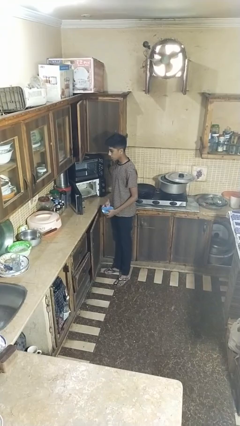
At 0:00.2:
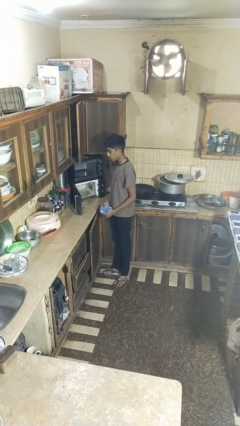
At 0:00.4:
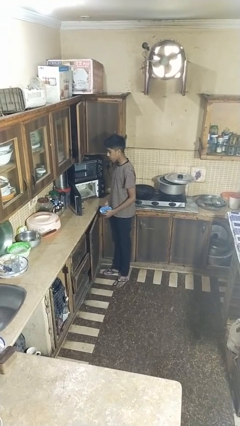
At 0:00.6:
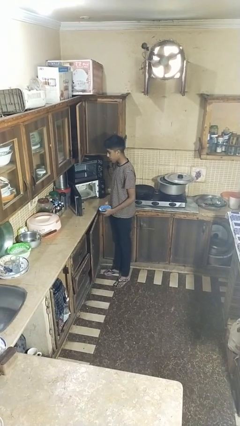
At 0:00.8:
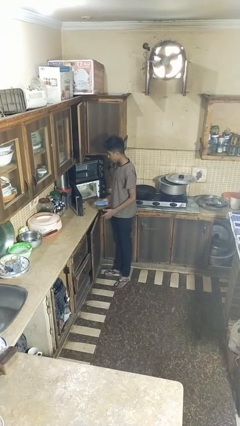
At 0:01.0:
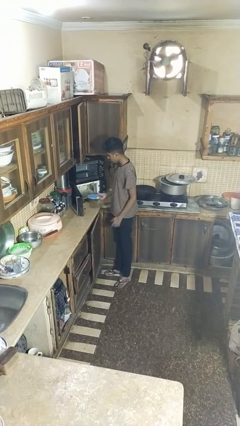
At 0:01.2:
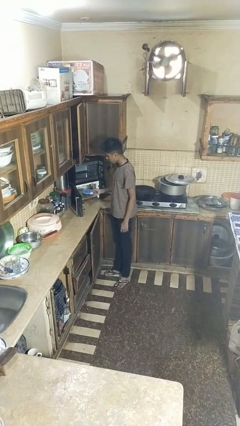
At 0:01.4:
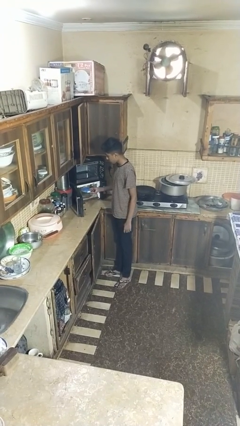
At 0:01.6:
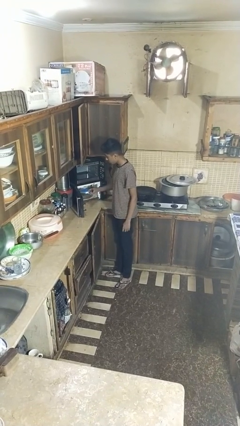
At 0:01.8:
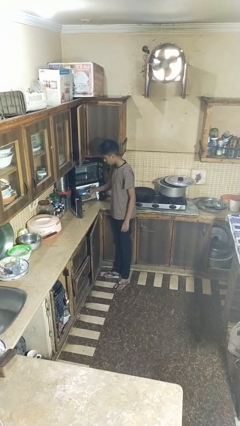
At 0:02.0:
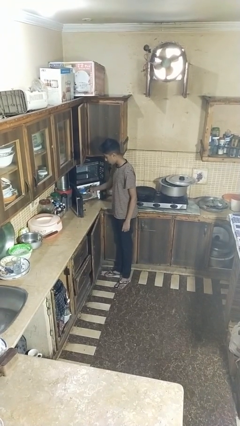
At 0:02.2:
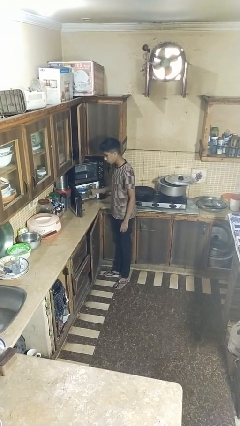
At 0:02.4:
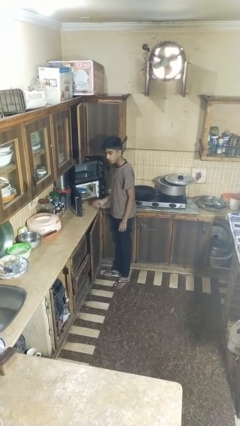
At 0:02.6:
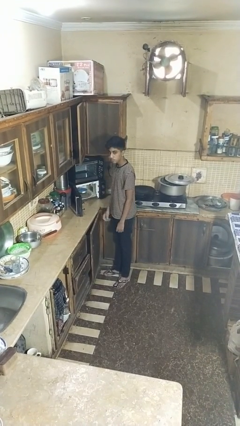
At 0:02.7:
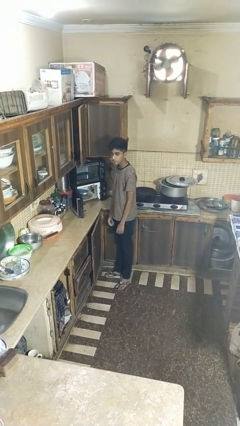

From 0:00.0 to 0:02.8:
person puts object into microwave

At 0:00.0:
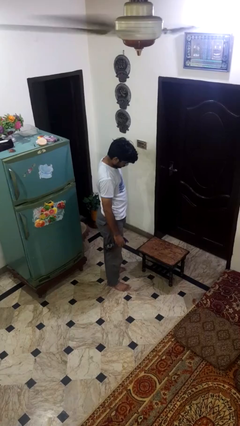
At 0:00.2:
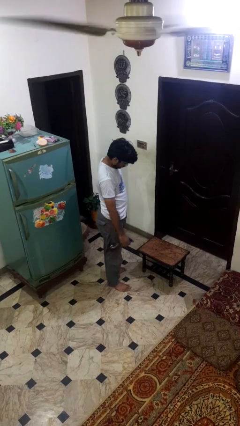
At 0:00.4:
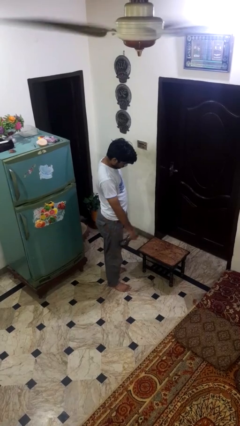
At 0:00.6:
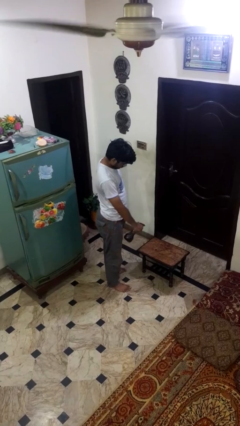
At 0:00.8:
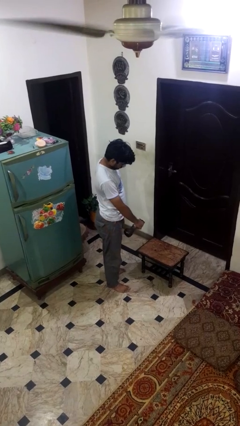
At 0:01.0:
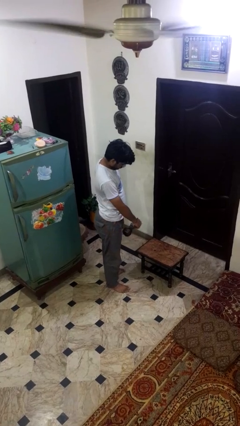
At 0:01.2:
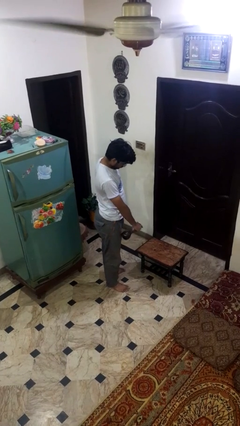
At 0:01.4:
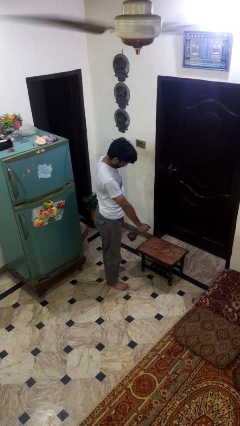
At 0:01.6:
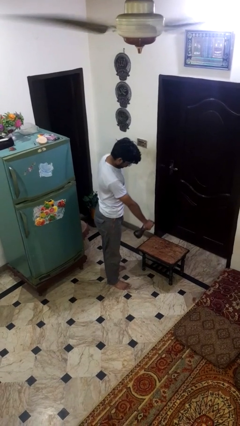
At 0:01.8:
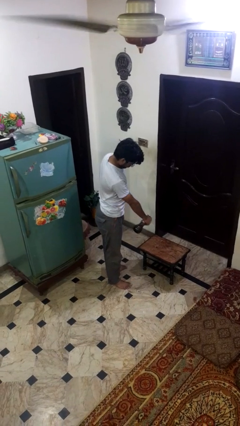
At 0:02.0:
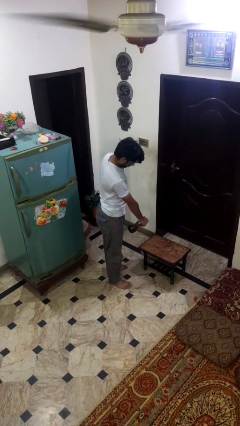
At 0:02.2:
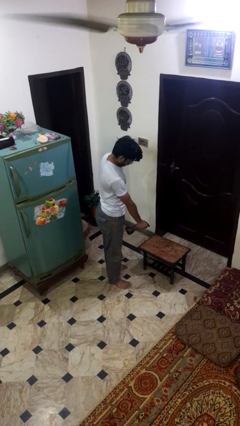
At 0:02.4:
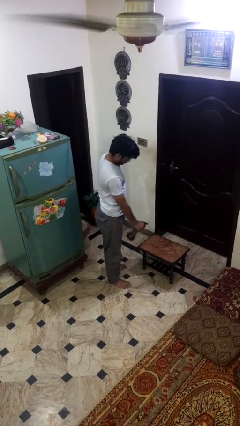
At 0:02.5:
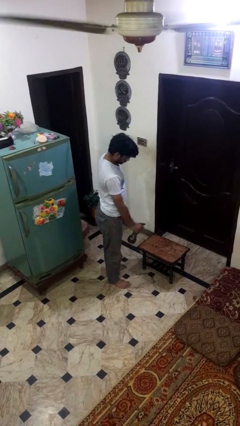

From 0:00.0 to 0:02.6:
person sprays from bottle

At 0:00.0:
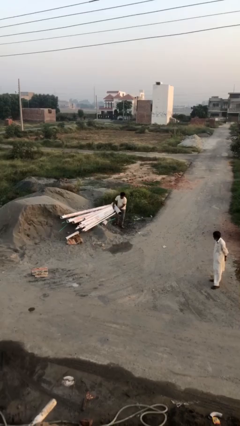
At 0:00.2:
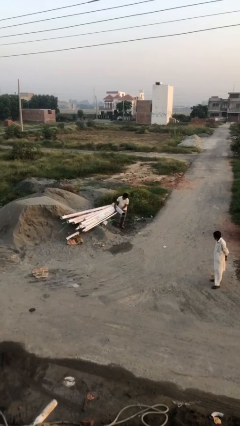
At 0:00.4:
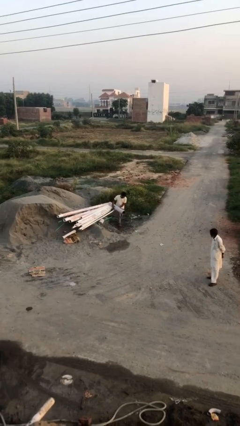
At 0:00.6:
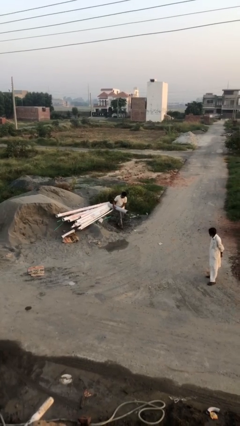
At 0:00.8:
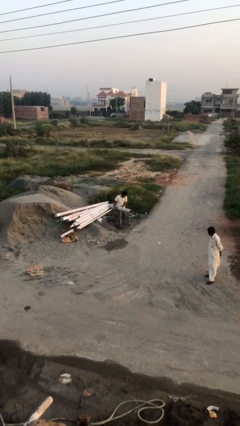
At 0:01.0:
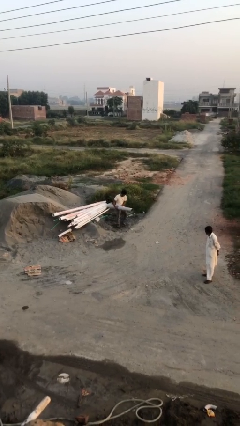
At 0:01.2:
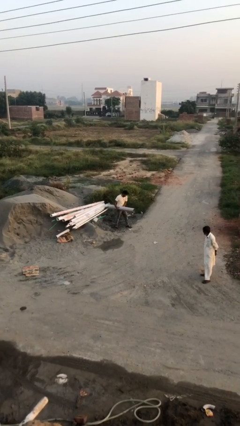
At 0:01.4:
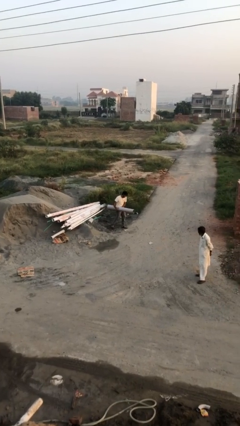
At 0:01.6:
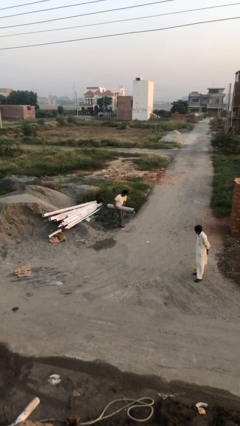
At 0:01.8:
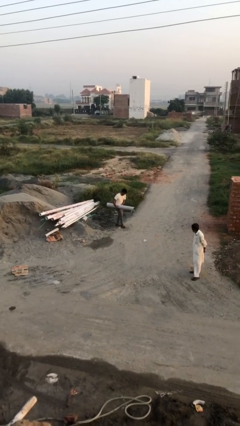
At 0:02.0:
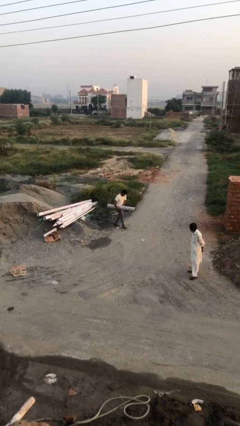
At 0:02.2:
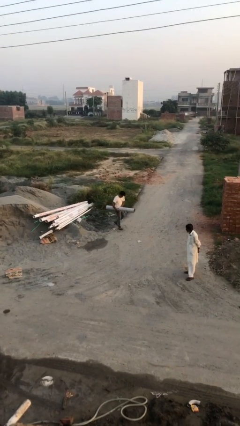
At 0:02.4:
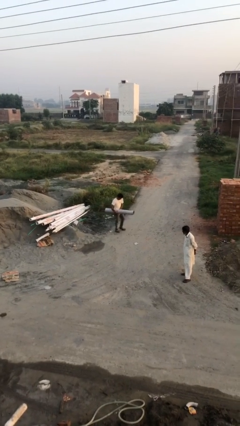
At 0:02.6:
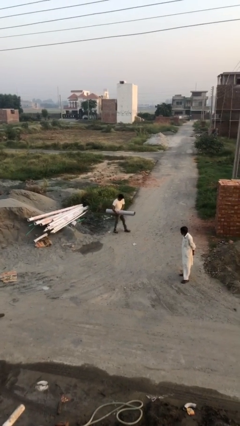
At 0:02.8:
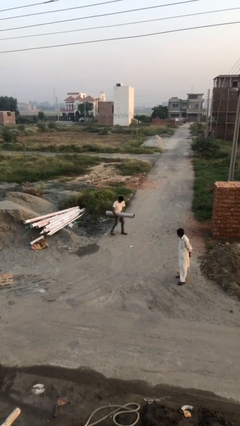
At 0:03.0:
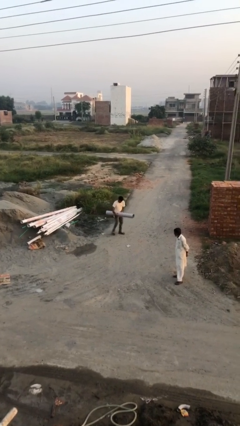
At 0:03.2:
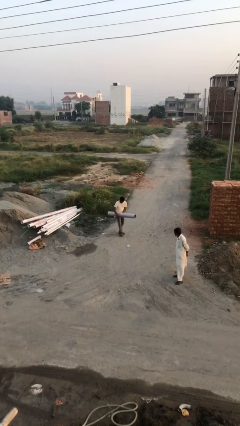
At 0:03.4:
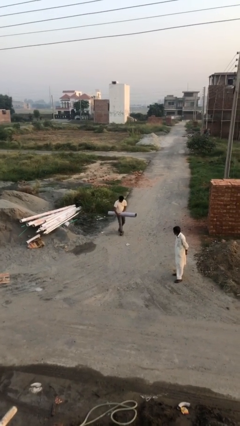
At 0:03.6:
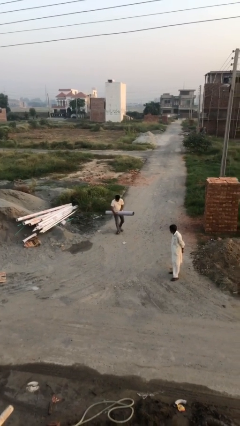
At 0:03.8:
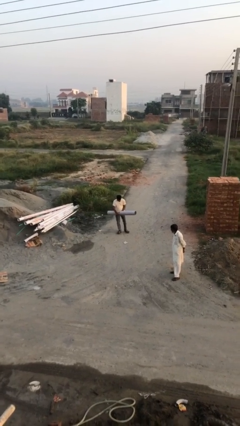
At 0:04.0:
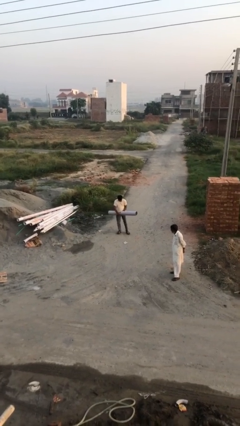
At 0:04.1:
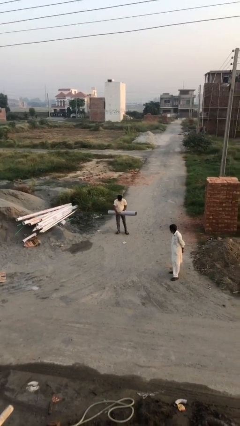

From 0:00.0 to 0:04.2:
person carries heavy object

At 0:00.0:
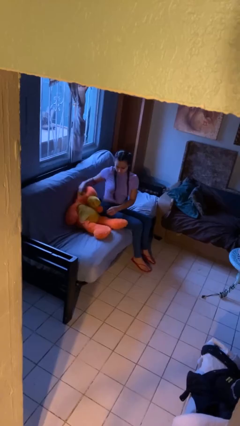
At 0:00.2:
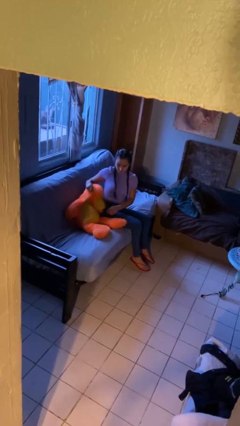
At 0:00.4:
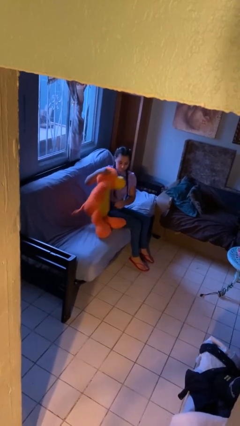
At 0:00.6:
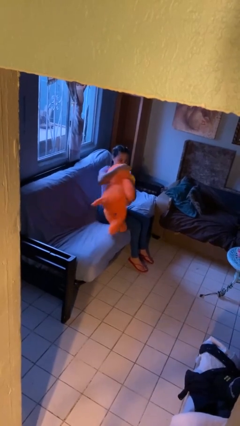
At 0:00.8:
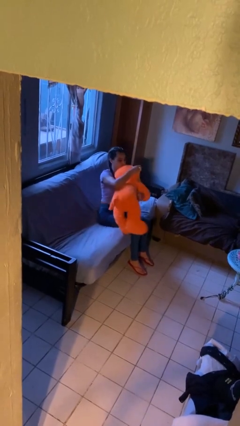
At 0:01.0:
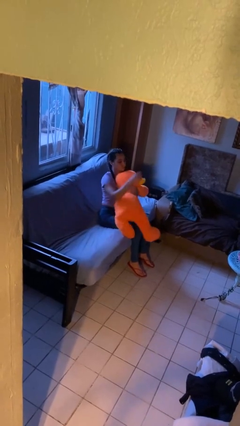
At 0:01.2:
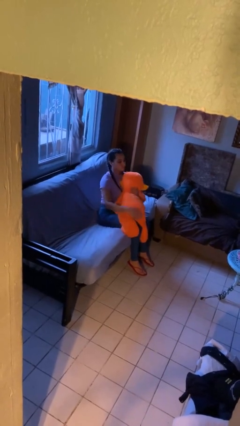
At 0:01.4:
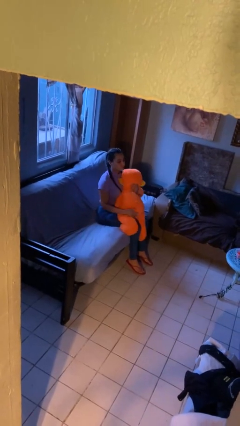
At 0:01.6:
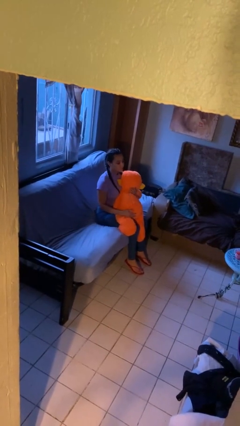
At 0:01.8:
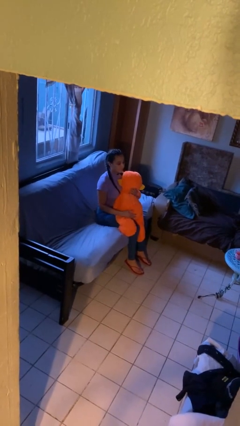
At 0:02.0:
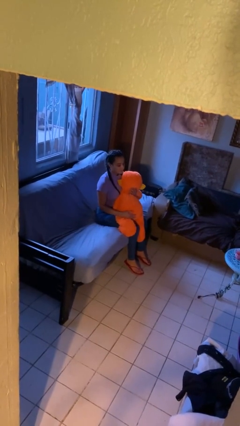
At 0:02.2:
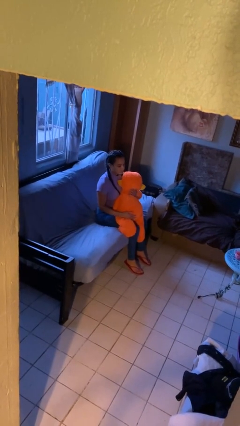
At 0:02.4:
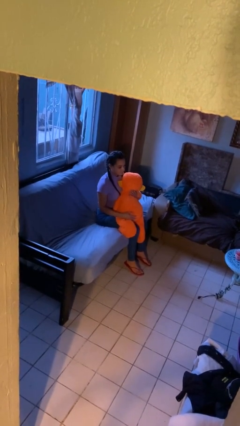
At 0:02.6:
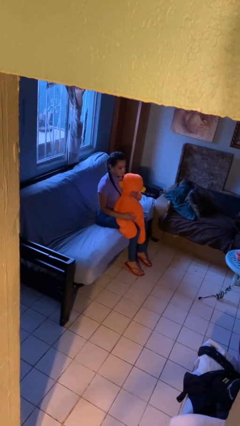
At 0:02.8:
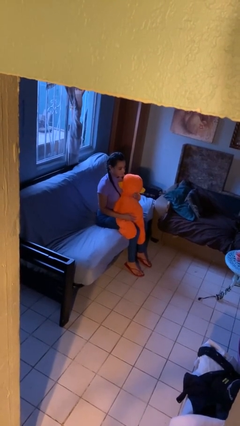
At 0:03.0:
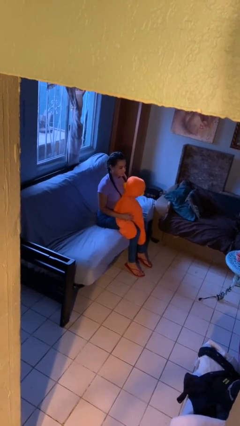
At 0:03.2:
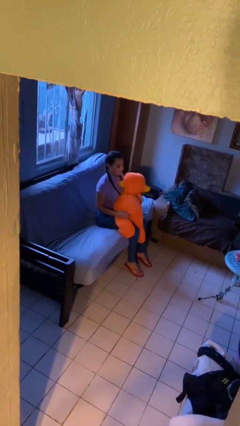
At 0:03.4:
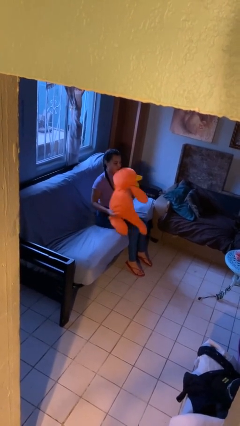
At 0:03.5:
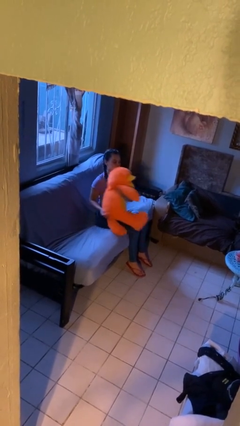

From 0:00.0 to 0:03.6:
person hugs stuffed animal

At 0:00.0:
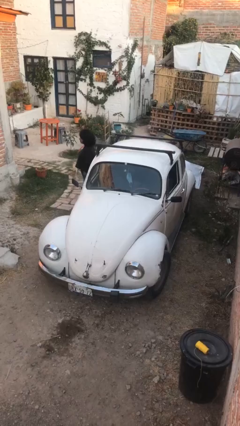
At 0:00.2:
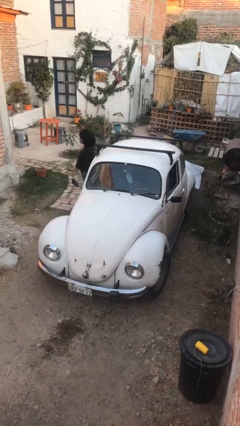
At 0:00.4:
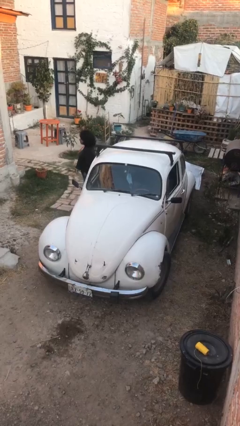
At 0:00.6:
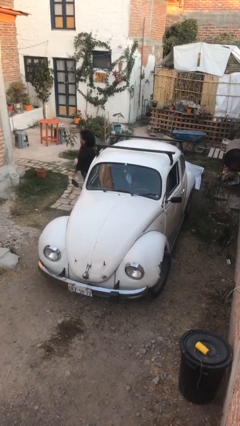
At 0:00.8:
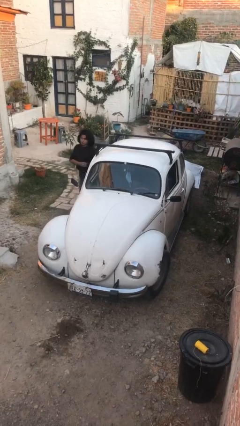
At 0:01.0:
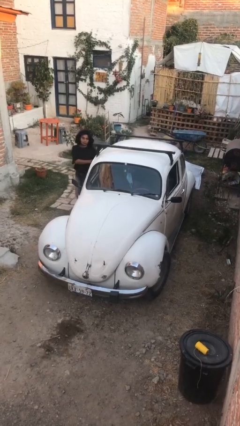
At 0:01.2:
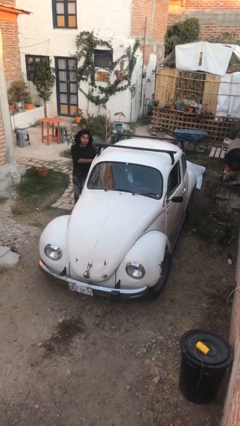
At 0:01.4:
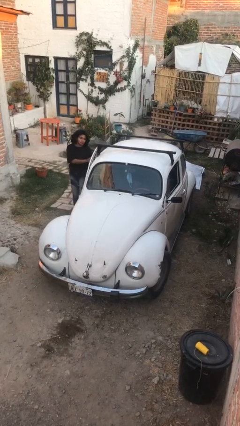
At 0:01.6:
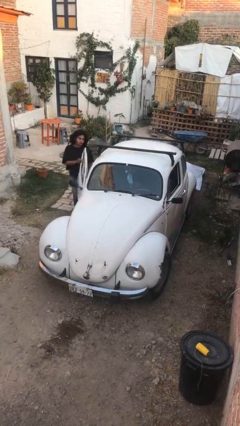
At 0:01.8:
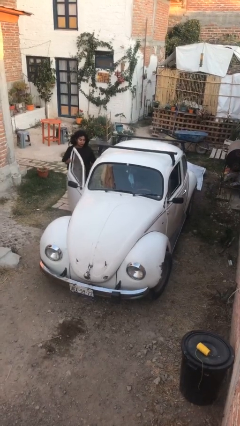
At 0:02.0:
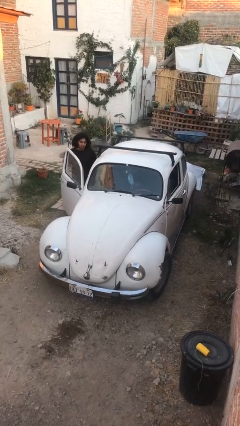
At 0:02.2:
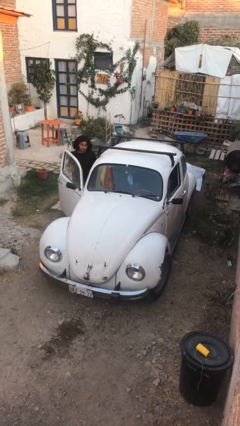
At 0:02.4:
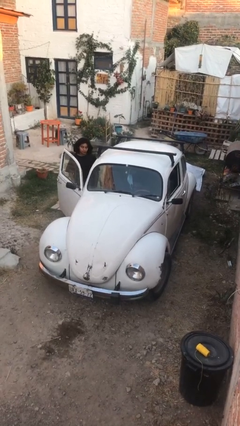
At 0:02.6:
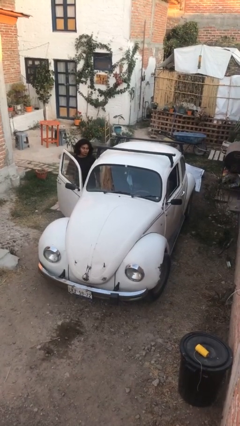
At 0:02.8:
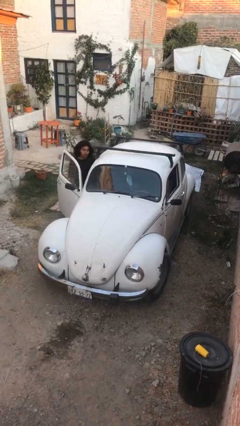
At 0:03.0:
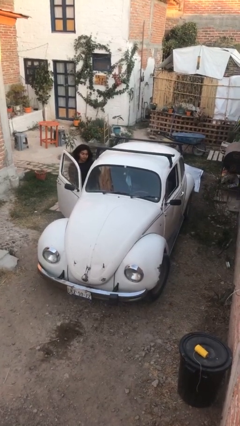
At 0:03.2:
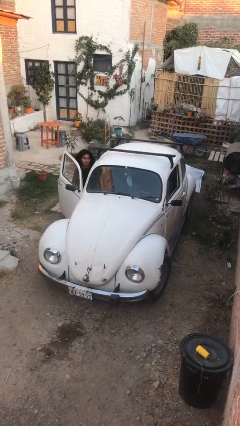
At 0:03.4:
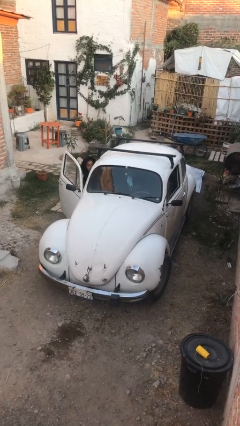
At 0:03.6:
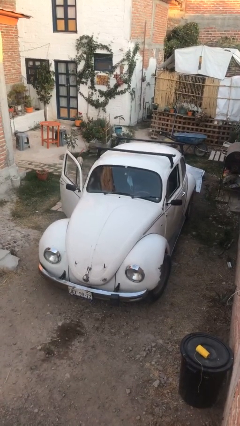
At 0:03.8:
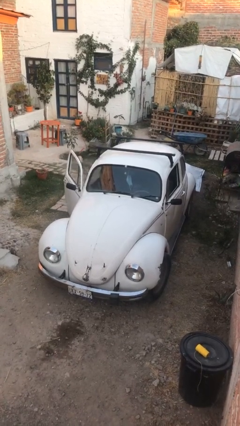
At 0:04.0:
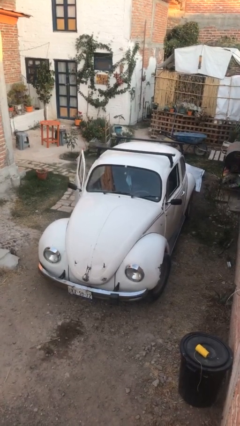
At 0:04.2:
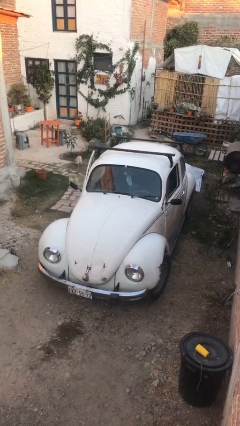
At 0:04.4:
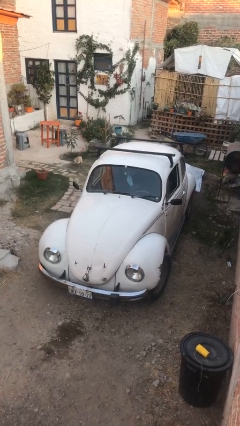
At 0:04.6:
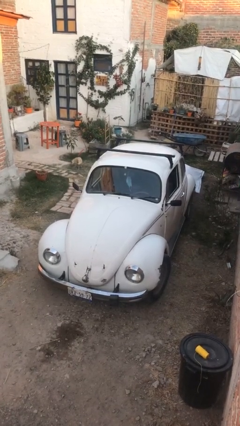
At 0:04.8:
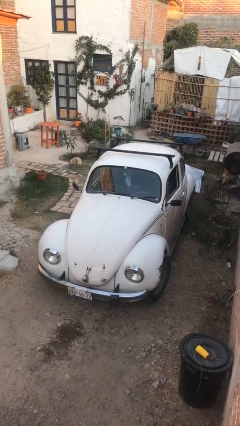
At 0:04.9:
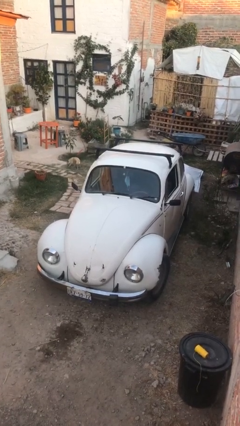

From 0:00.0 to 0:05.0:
car picks up person
